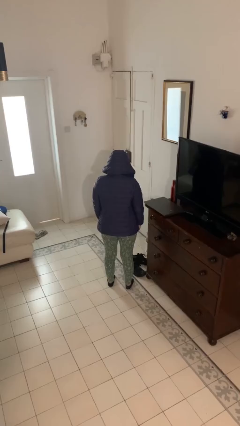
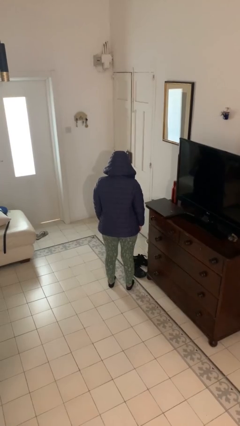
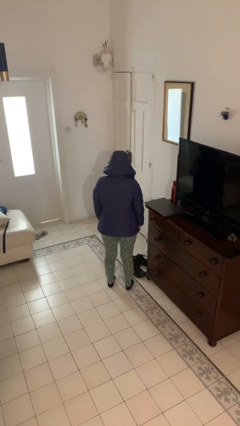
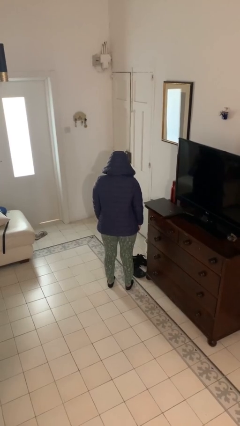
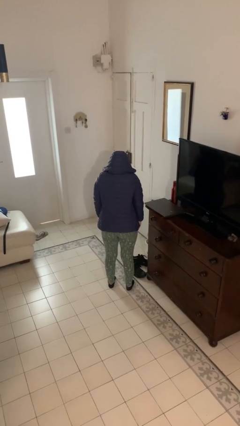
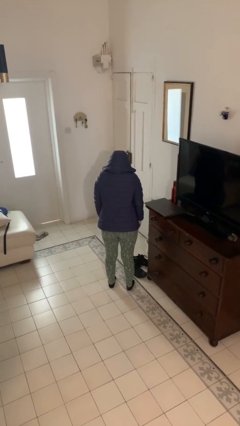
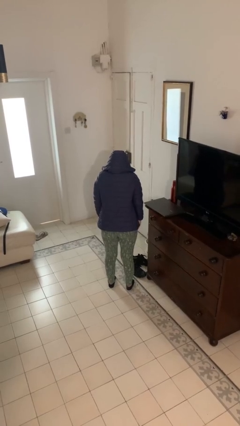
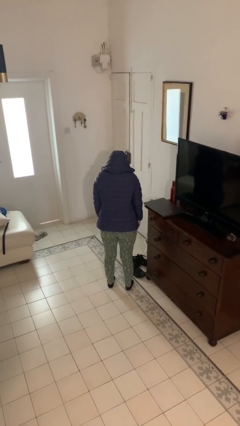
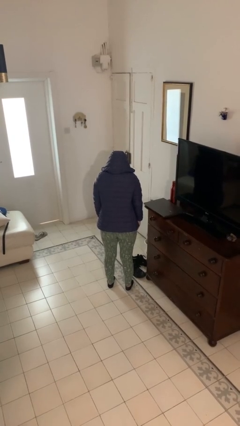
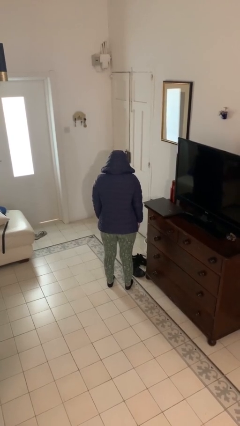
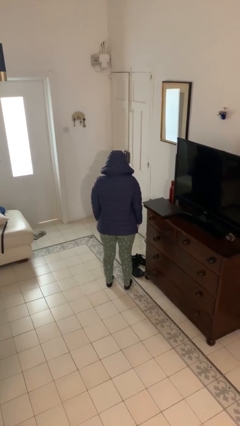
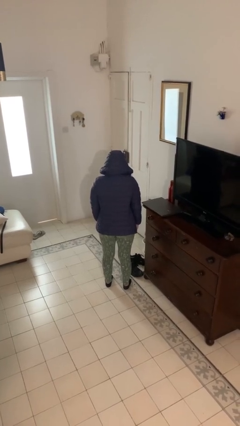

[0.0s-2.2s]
person shrugs

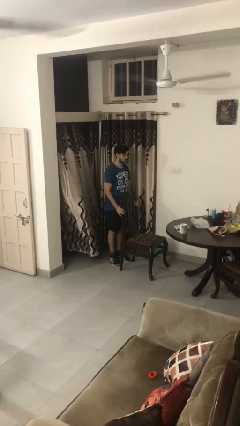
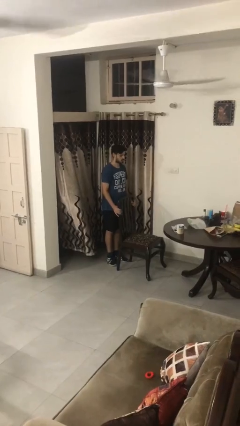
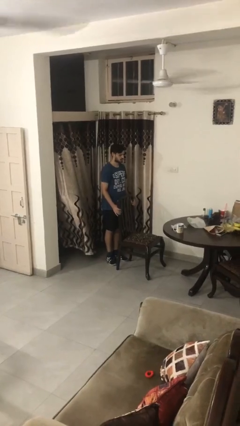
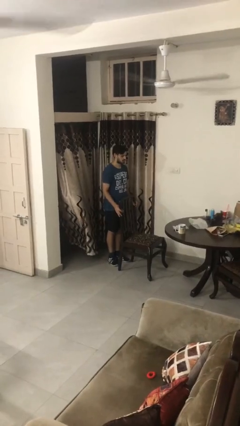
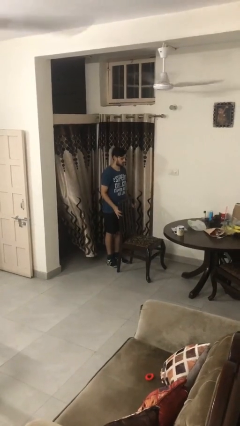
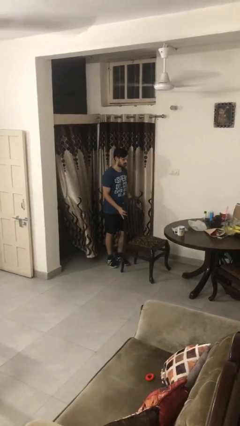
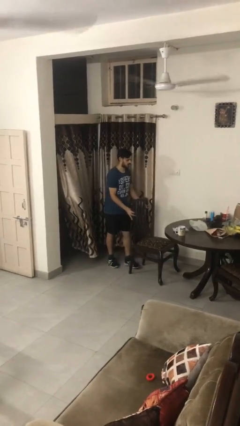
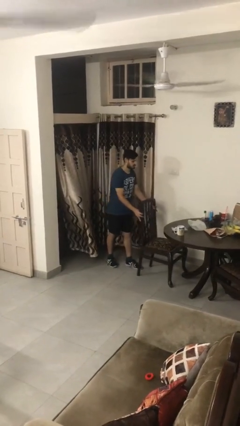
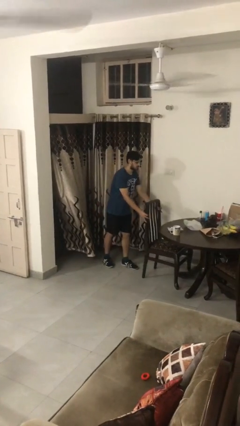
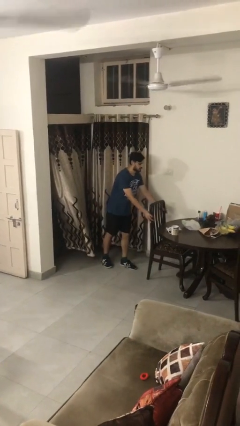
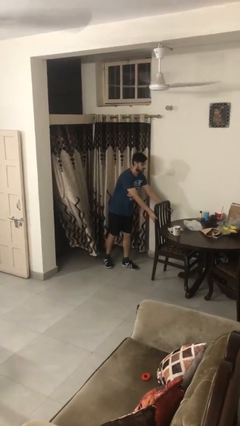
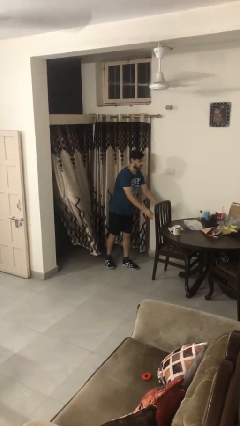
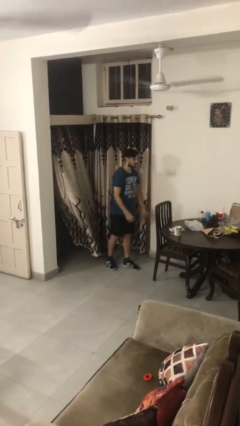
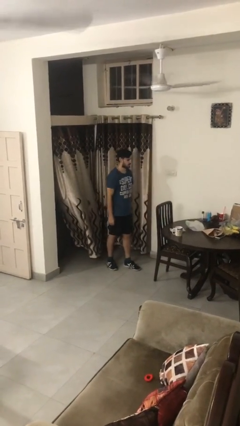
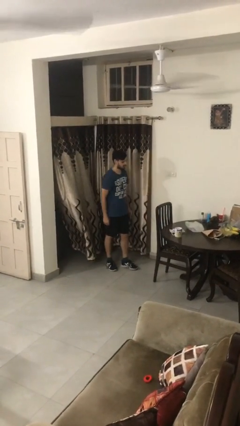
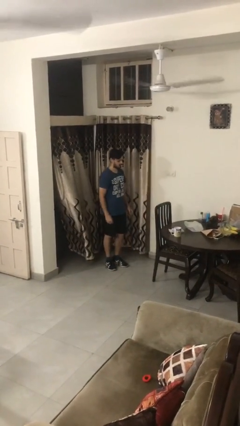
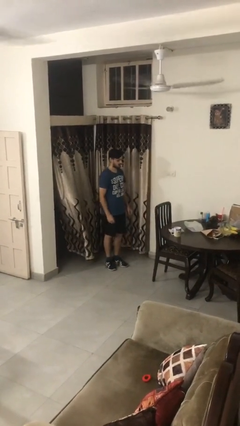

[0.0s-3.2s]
person pushes in chair

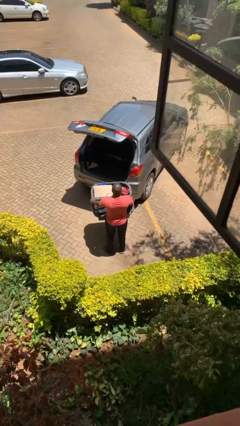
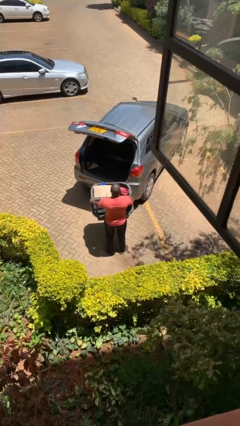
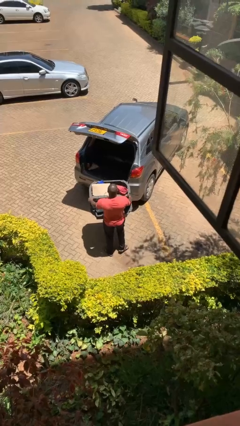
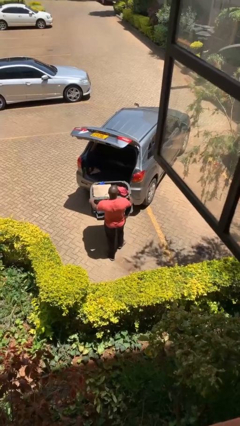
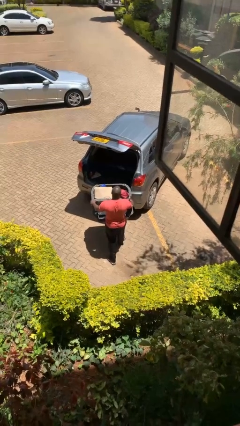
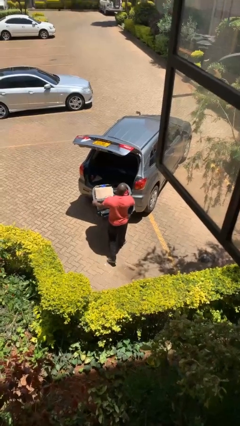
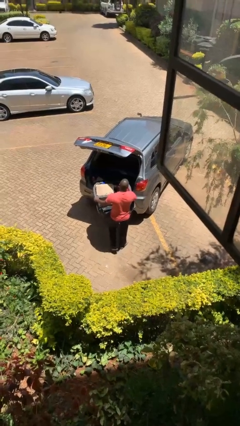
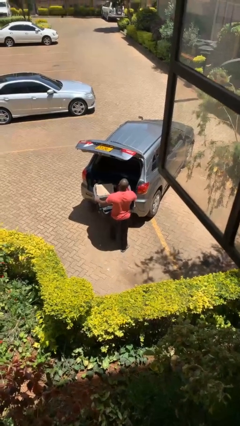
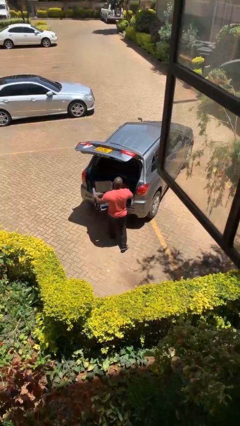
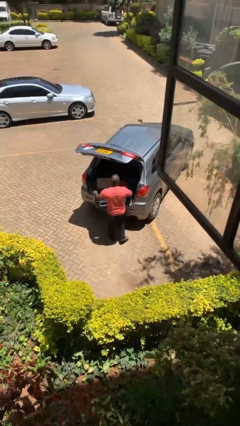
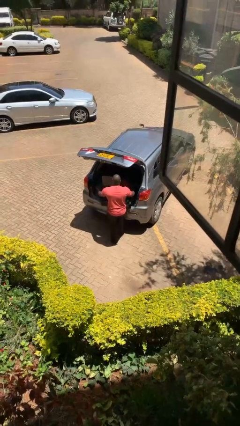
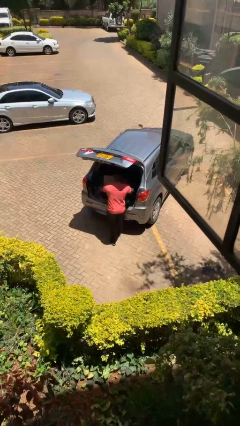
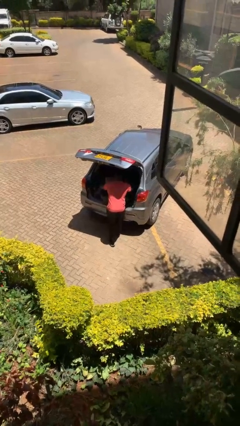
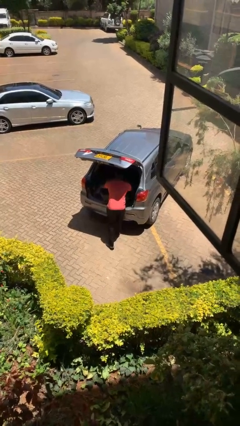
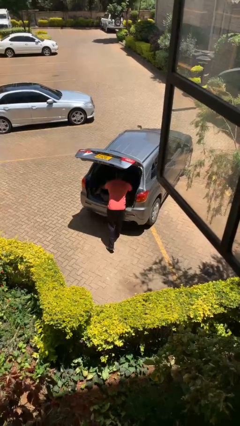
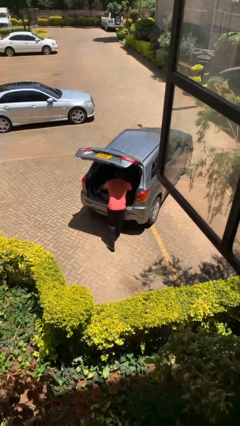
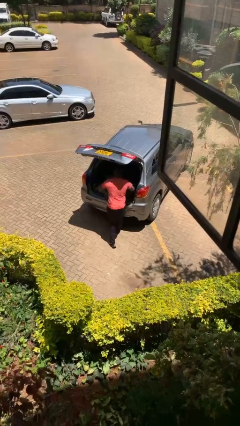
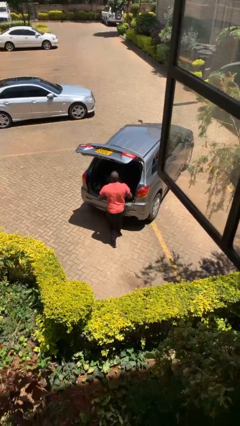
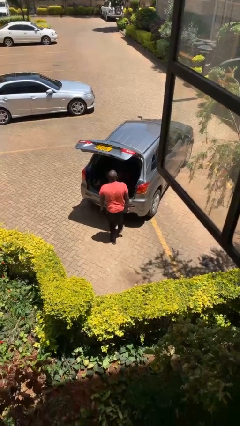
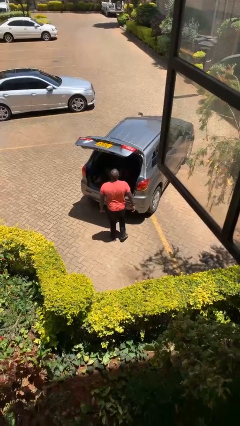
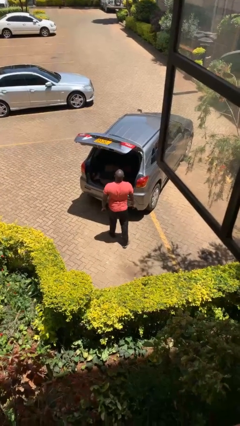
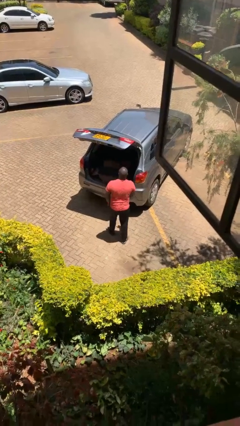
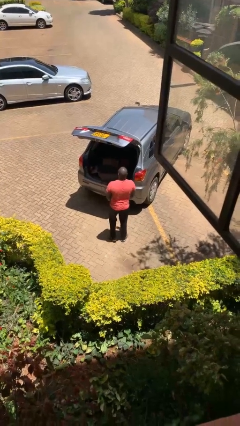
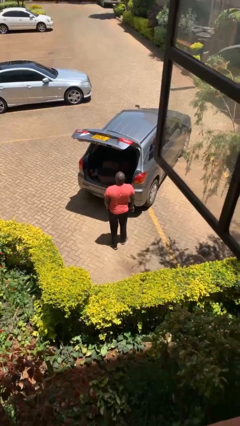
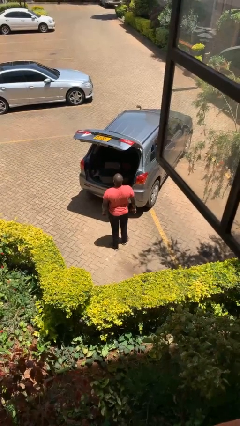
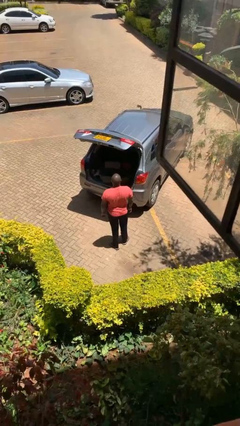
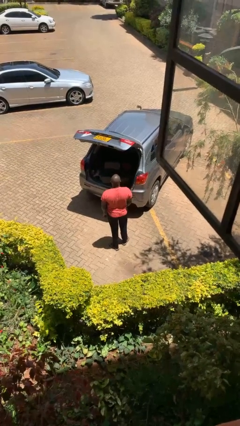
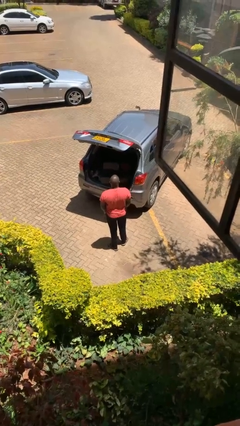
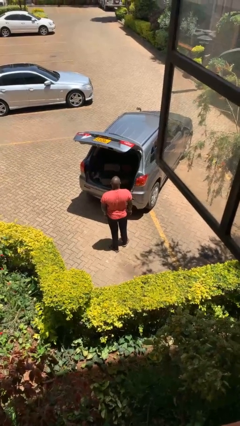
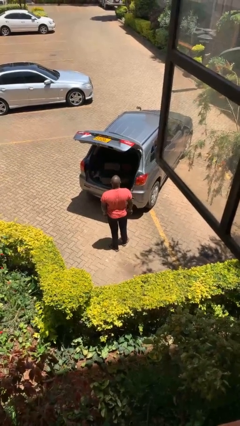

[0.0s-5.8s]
person loads car

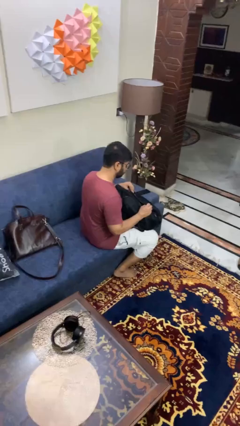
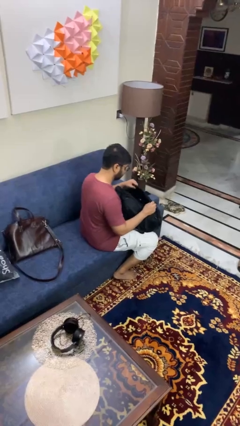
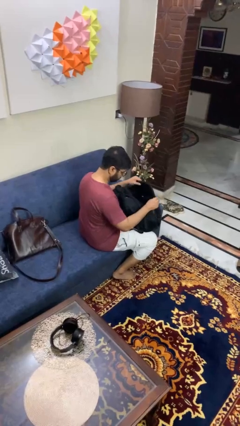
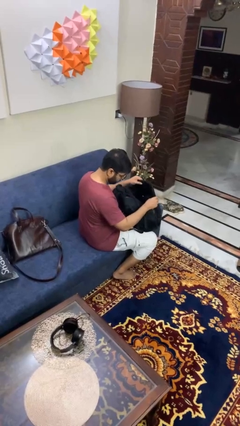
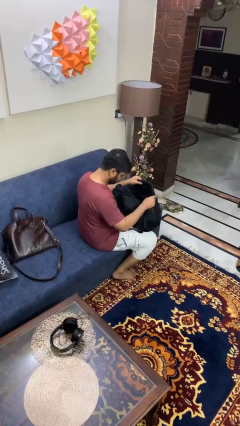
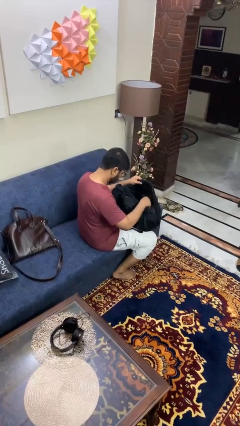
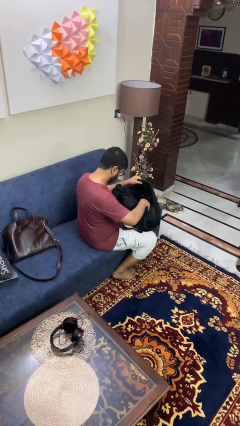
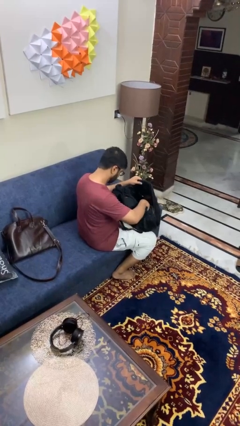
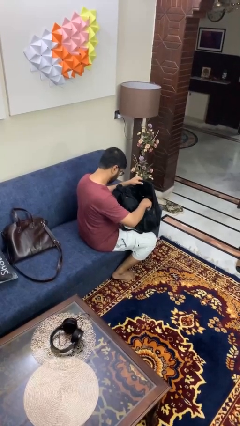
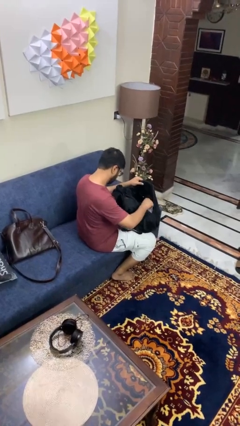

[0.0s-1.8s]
person searches in backpack

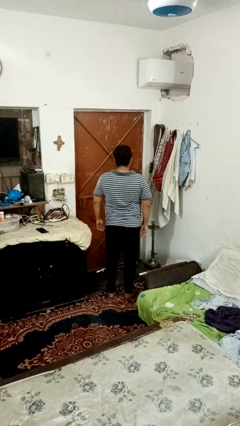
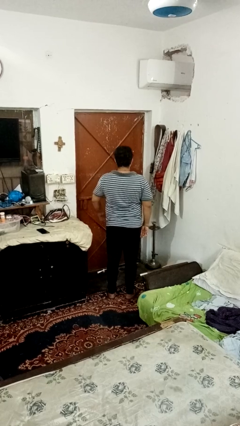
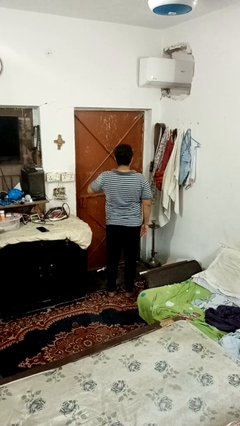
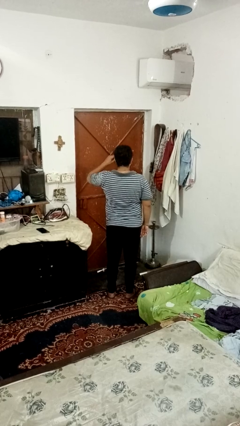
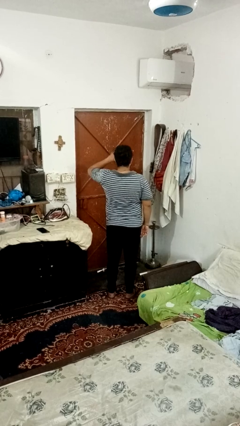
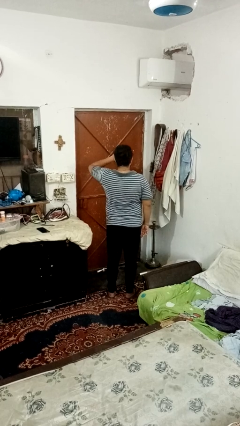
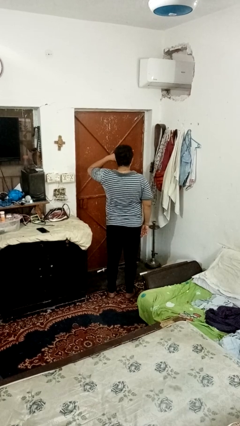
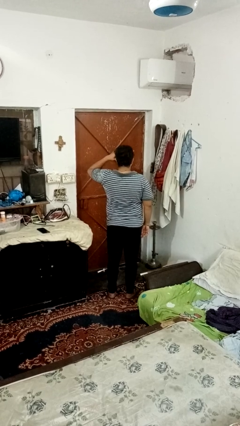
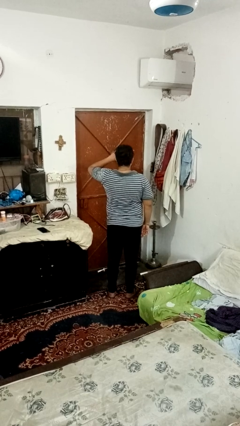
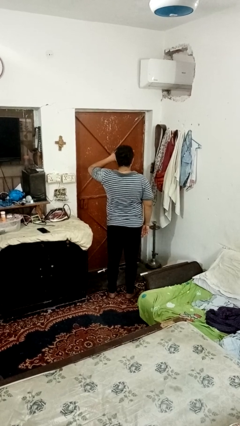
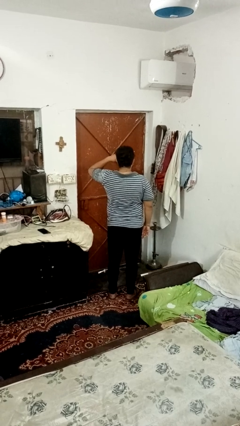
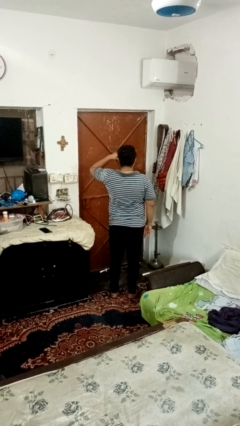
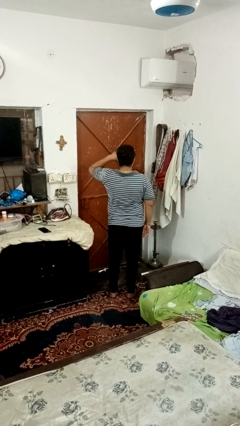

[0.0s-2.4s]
person rubs eyes

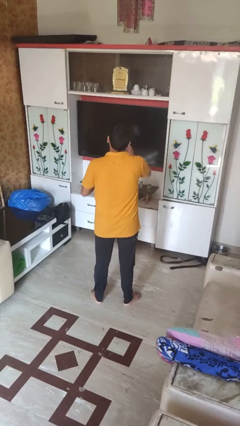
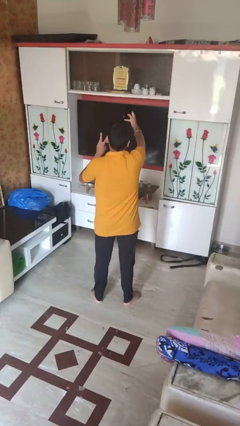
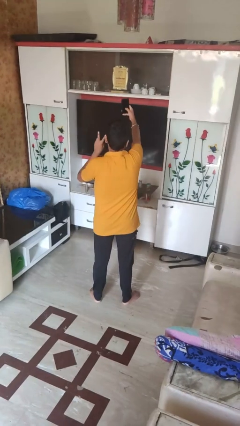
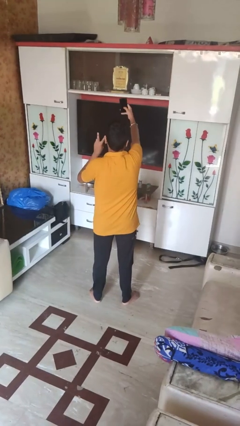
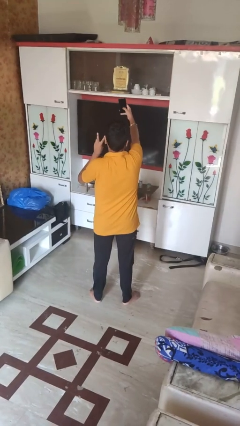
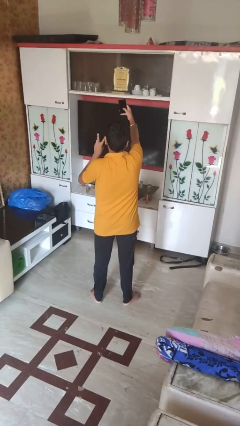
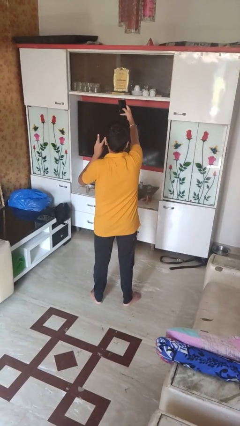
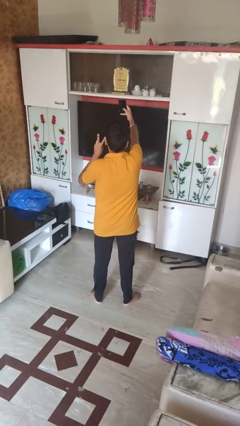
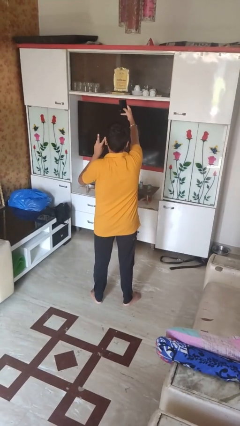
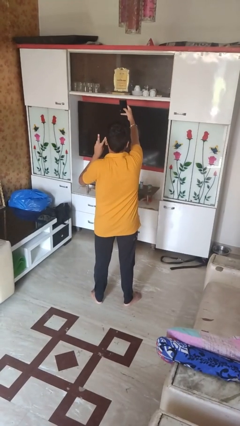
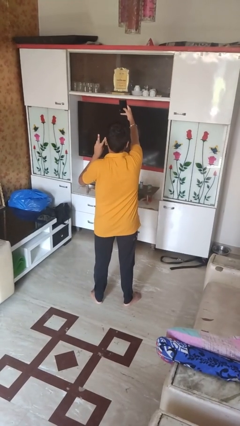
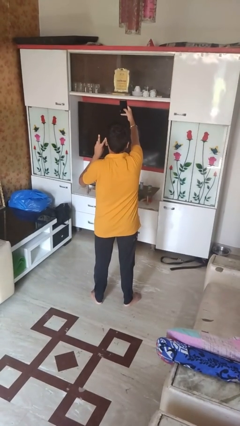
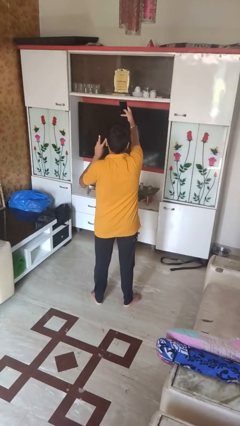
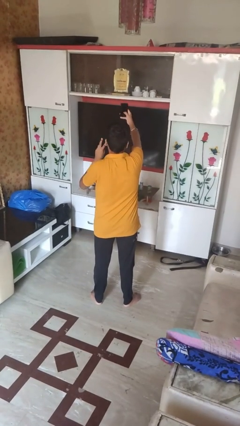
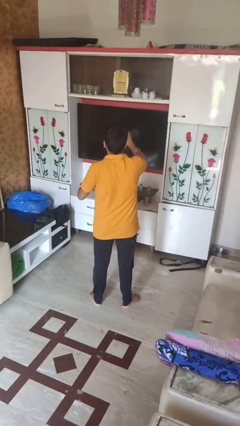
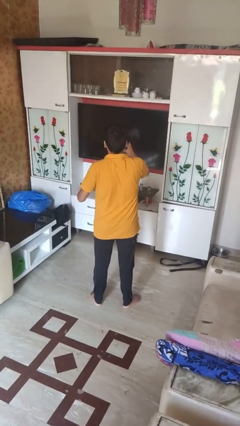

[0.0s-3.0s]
person takes selfie
